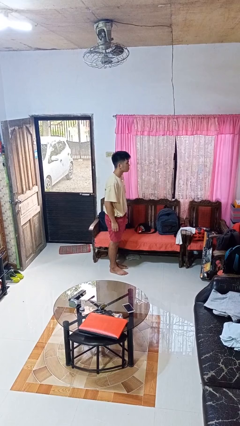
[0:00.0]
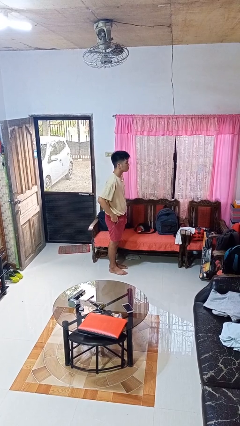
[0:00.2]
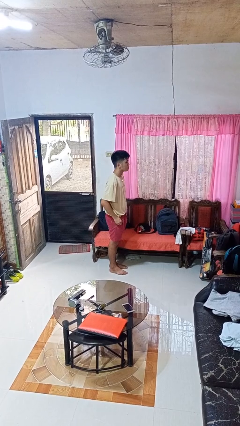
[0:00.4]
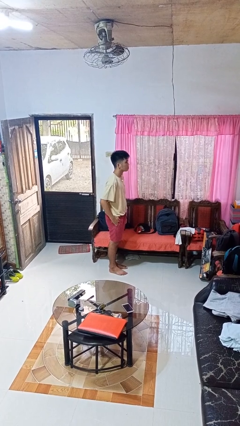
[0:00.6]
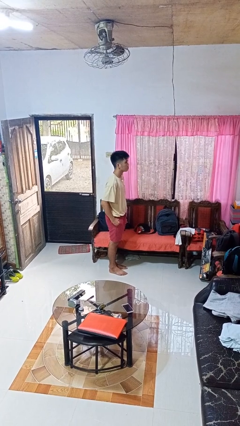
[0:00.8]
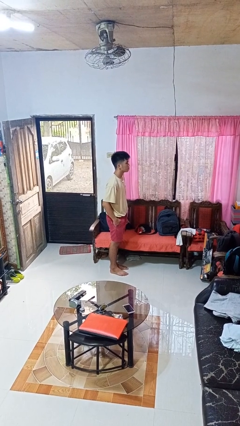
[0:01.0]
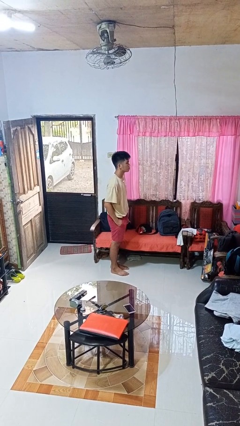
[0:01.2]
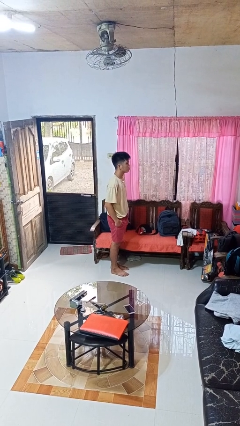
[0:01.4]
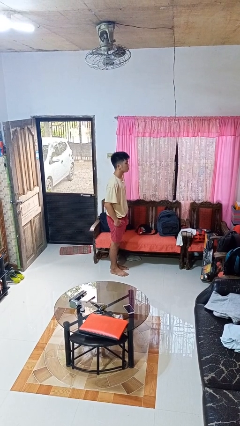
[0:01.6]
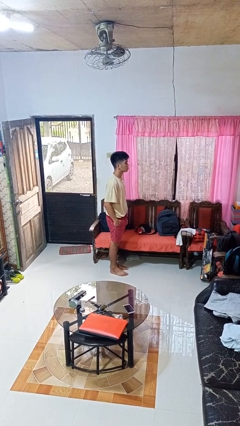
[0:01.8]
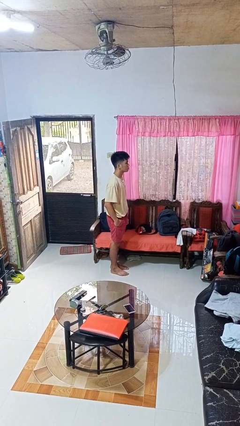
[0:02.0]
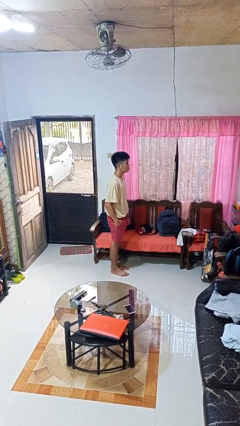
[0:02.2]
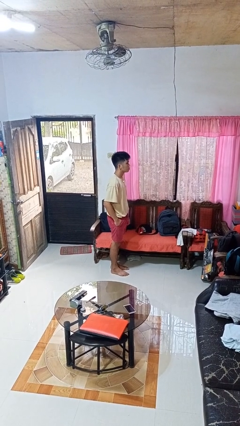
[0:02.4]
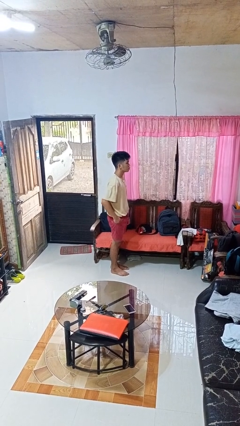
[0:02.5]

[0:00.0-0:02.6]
person puts hands in back pockets

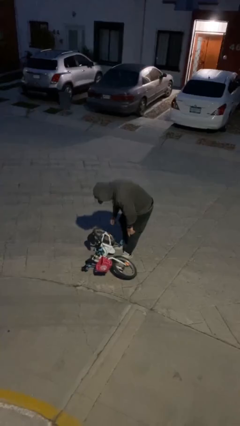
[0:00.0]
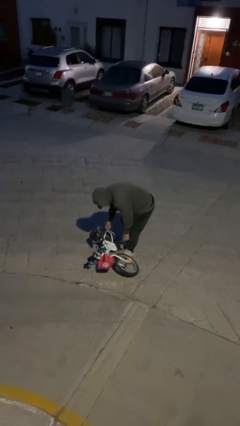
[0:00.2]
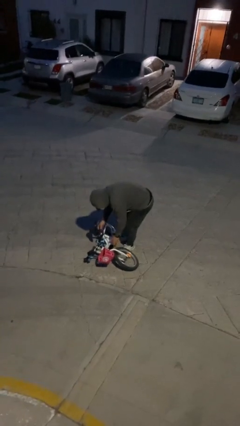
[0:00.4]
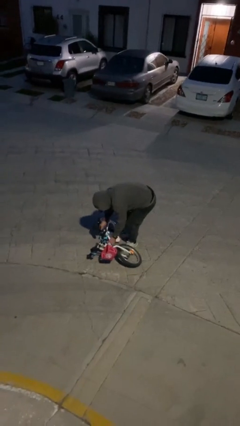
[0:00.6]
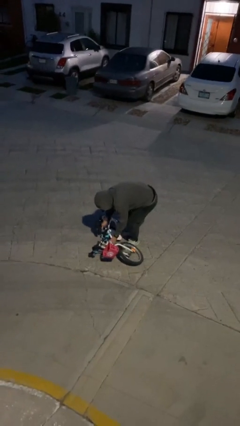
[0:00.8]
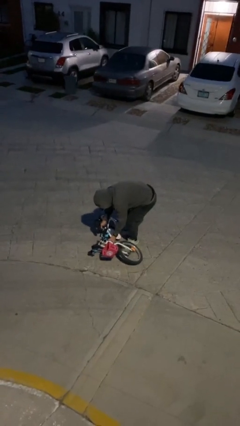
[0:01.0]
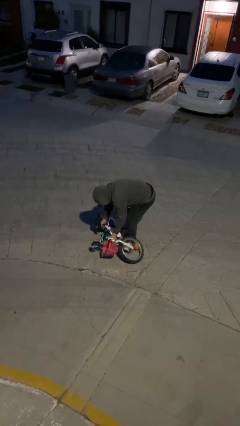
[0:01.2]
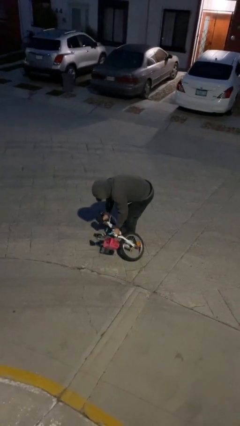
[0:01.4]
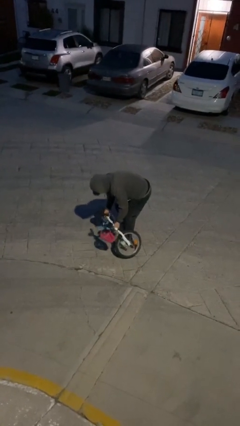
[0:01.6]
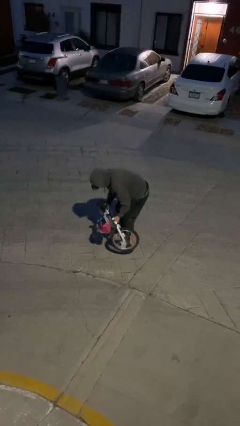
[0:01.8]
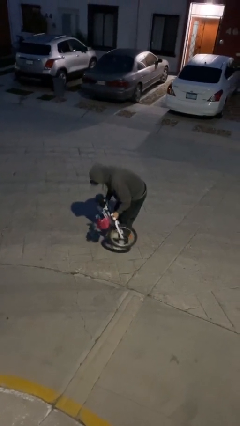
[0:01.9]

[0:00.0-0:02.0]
person picks up object from floor

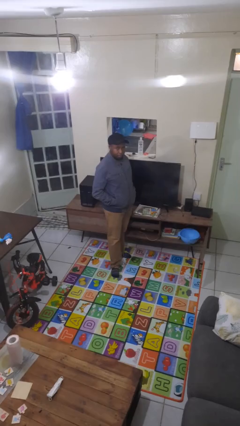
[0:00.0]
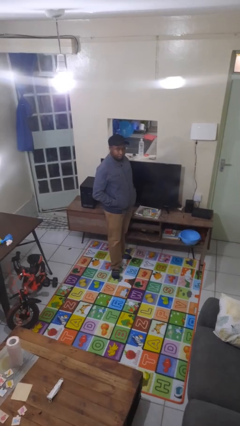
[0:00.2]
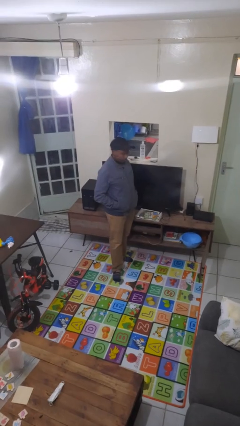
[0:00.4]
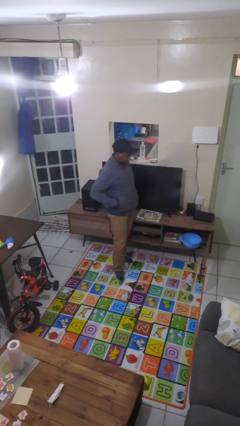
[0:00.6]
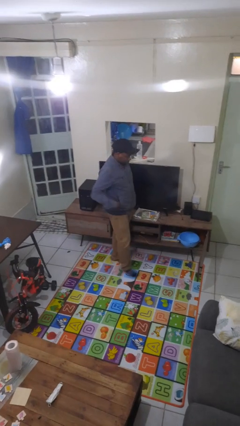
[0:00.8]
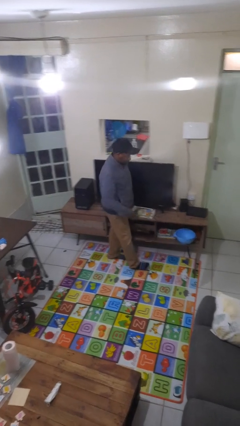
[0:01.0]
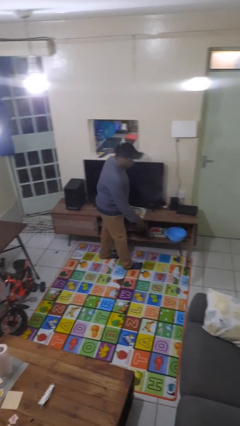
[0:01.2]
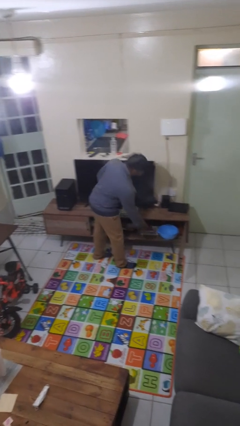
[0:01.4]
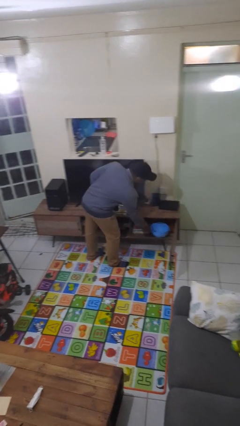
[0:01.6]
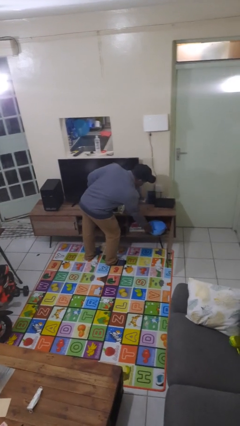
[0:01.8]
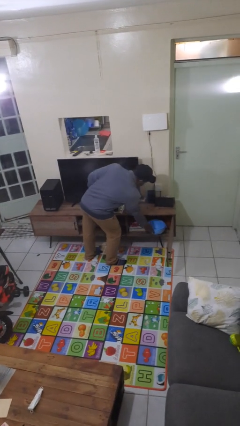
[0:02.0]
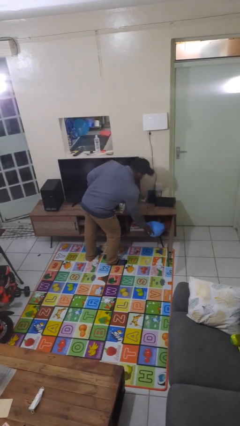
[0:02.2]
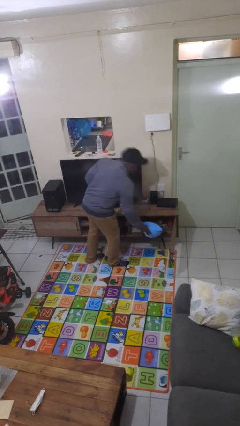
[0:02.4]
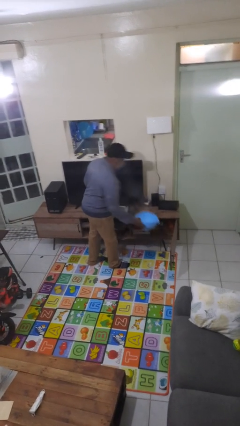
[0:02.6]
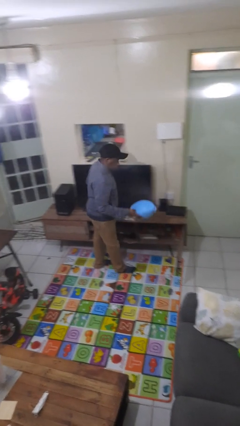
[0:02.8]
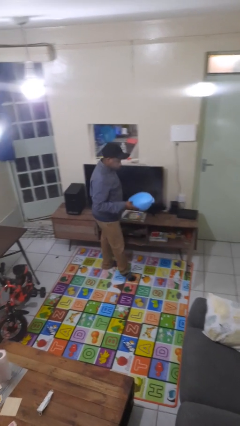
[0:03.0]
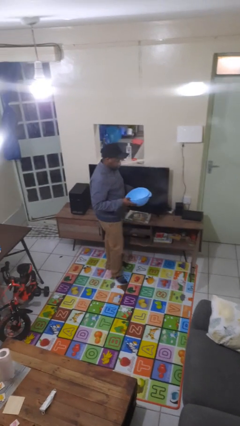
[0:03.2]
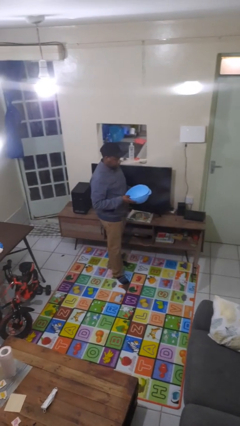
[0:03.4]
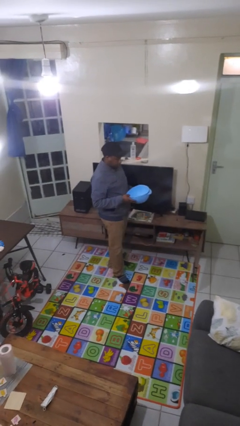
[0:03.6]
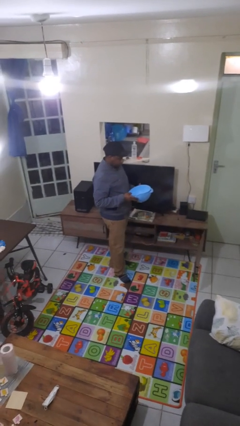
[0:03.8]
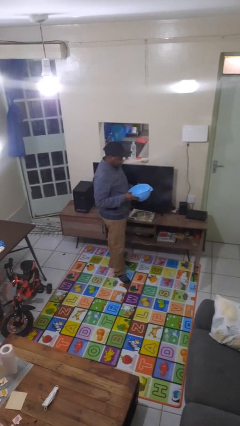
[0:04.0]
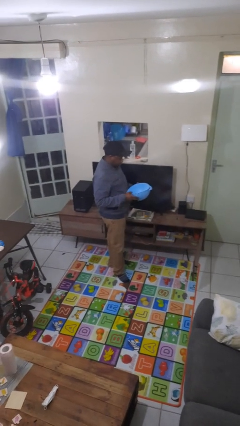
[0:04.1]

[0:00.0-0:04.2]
person picks up object from cabinet

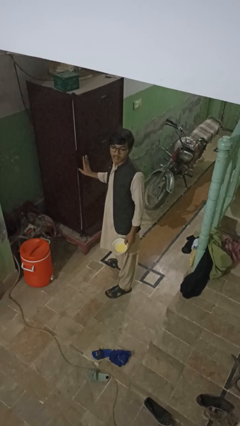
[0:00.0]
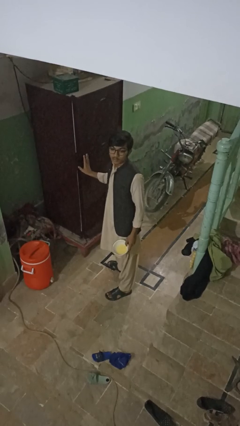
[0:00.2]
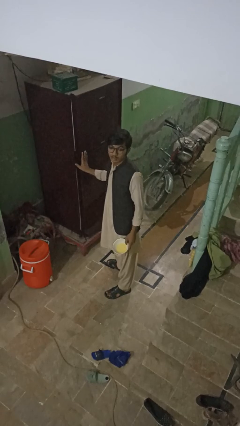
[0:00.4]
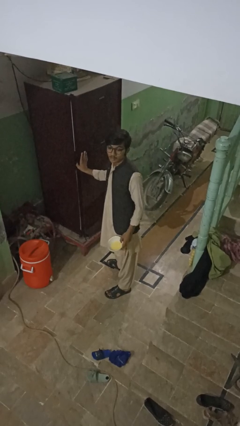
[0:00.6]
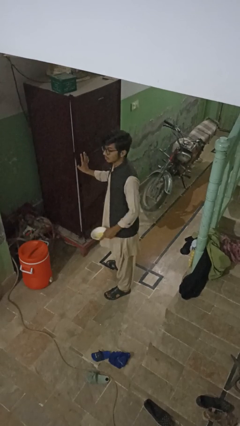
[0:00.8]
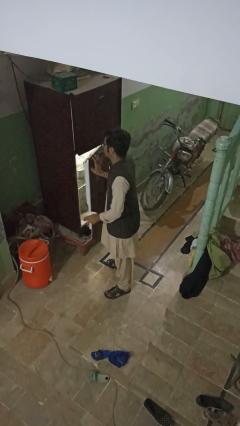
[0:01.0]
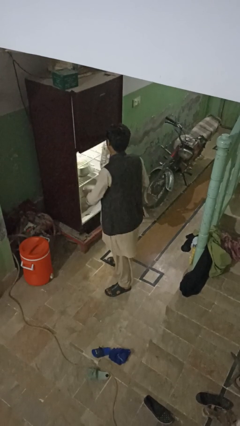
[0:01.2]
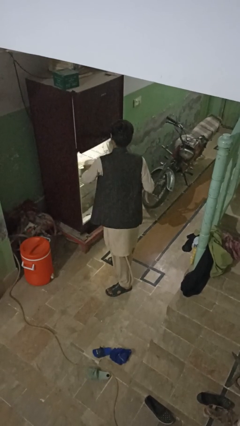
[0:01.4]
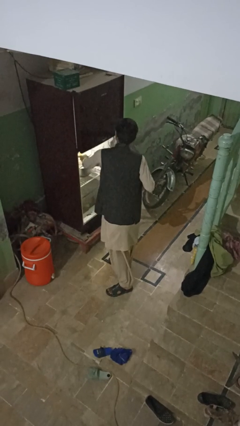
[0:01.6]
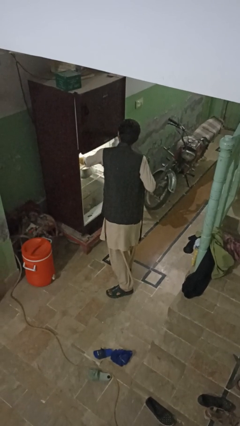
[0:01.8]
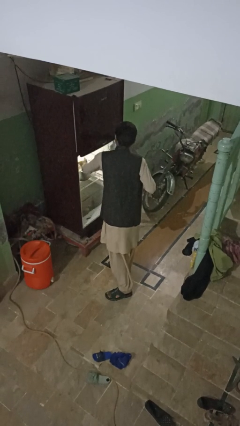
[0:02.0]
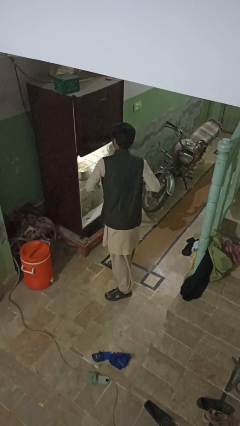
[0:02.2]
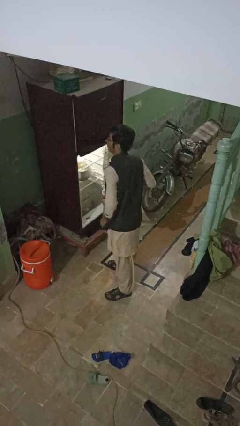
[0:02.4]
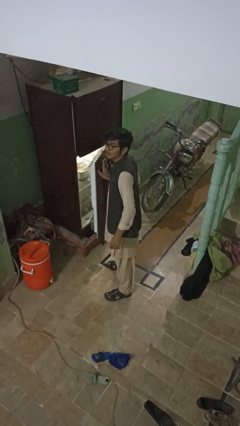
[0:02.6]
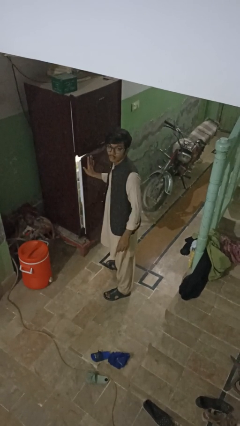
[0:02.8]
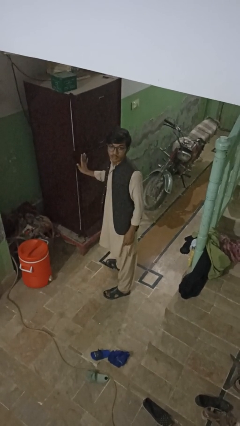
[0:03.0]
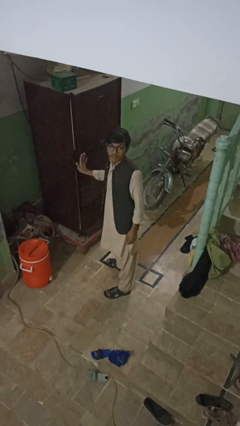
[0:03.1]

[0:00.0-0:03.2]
person puts object into refrigerator

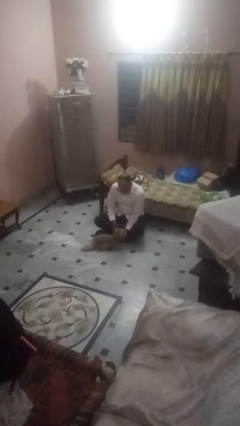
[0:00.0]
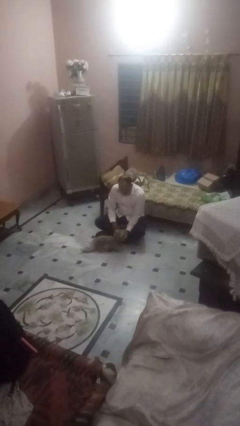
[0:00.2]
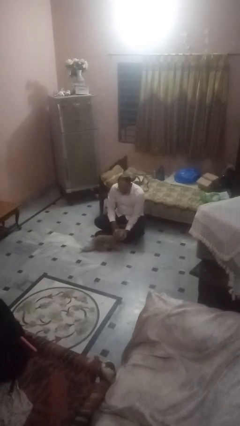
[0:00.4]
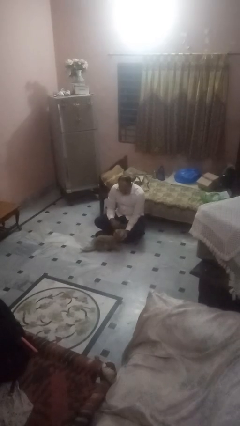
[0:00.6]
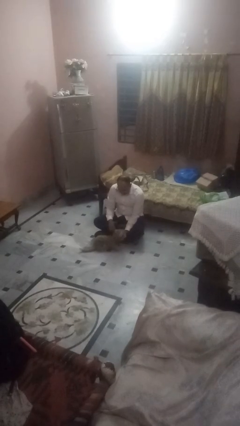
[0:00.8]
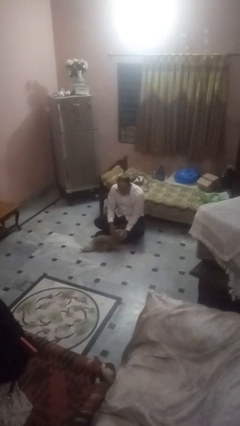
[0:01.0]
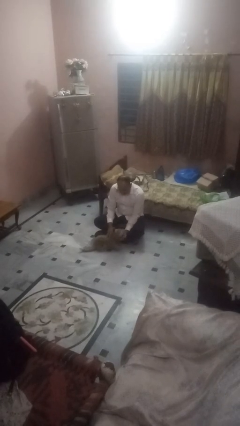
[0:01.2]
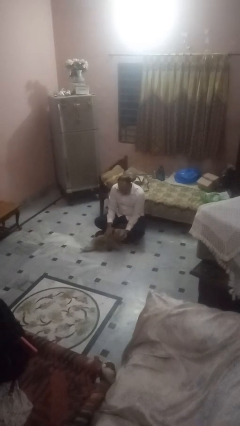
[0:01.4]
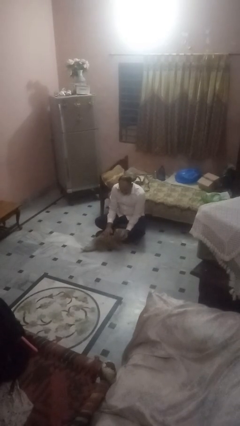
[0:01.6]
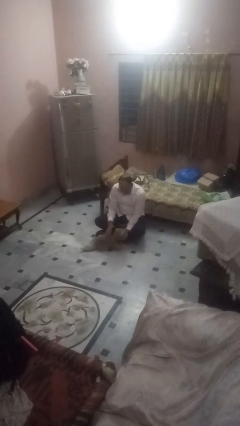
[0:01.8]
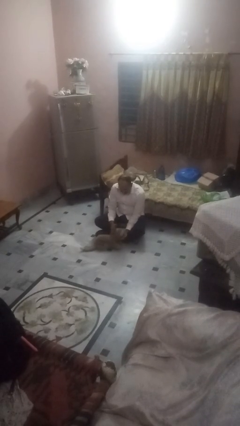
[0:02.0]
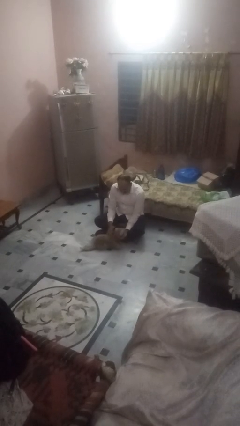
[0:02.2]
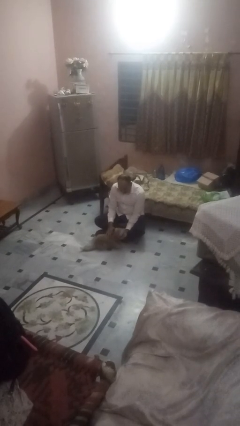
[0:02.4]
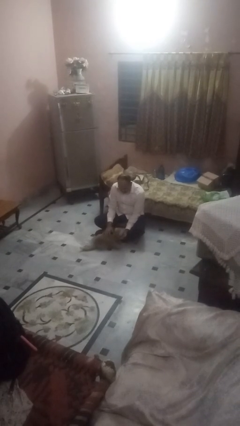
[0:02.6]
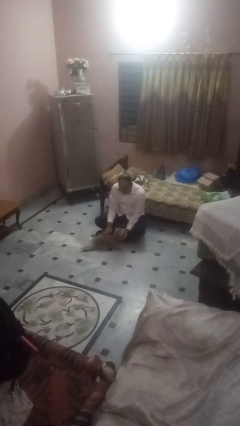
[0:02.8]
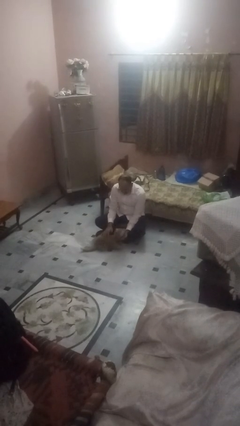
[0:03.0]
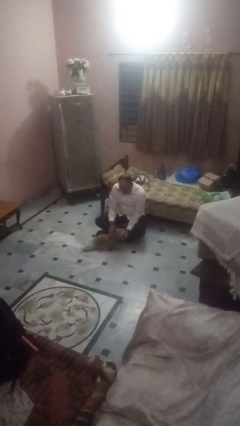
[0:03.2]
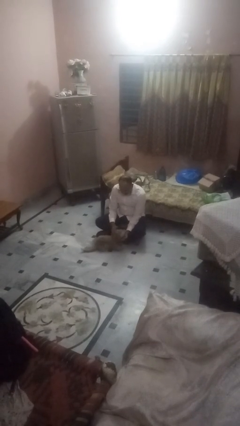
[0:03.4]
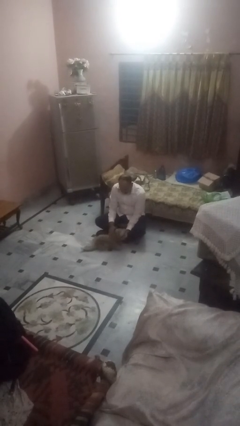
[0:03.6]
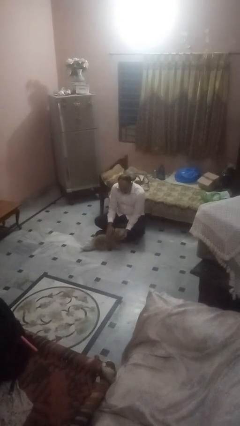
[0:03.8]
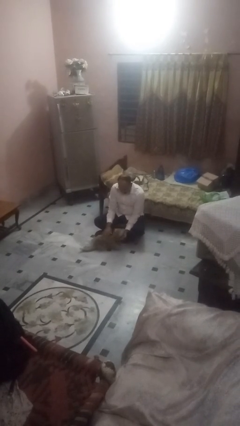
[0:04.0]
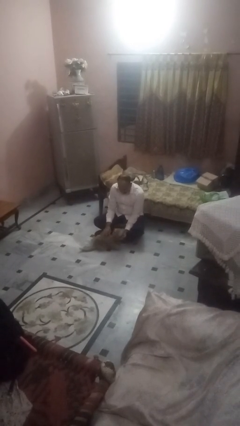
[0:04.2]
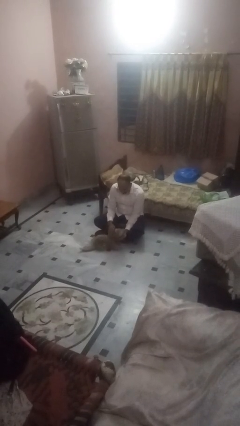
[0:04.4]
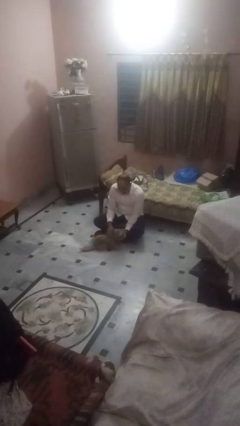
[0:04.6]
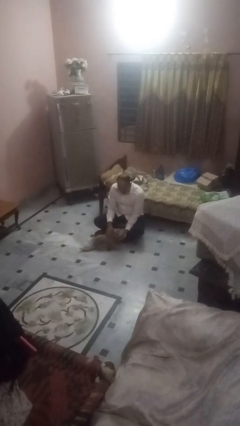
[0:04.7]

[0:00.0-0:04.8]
person pets dog

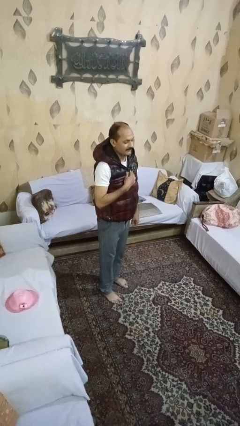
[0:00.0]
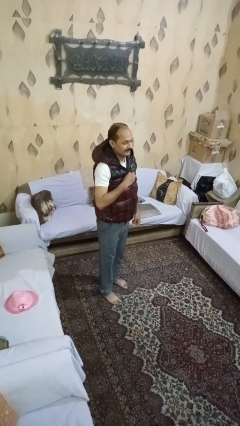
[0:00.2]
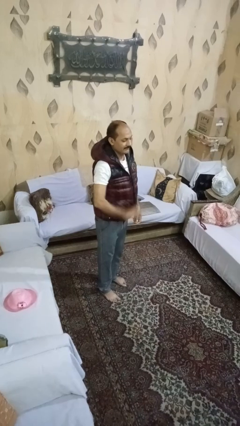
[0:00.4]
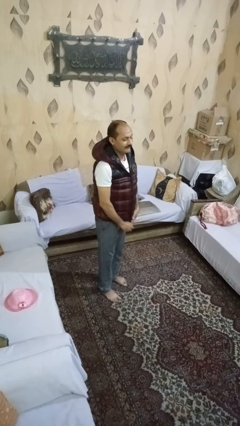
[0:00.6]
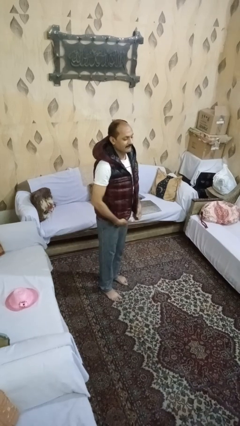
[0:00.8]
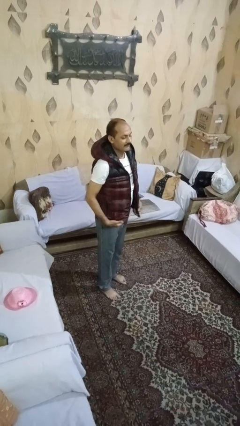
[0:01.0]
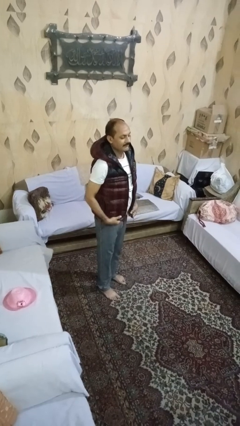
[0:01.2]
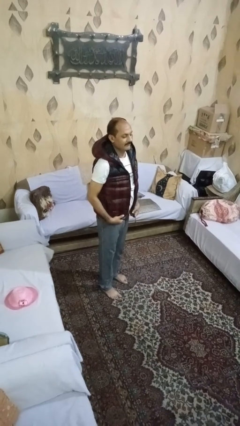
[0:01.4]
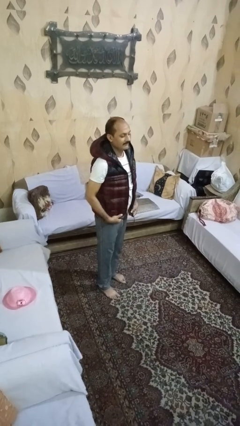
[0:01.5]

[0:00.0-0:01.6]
person unzips jacket
